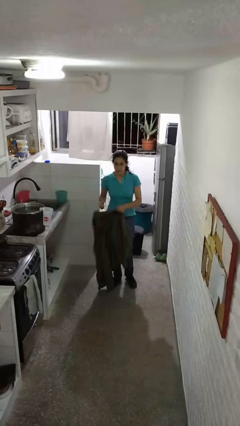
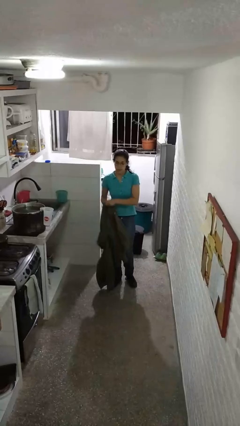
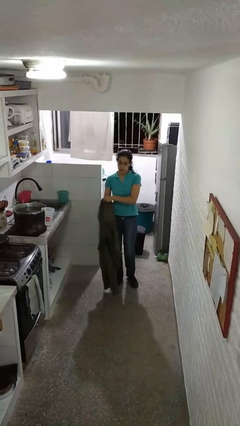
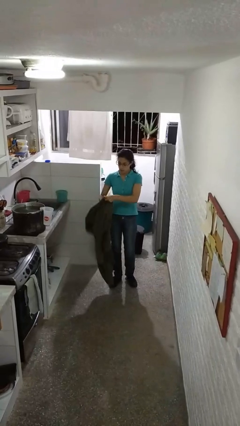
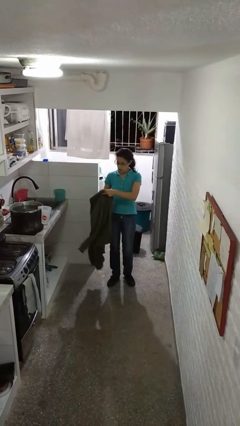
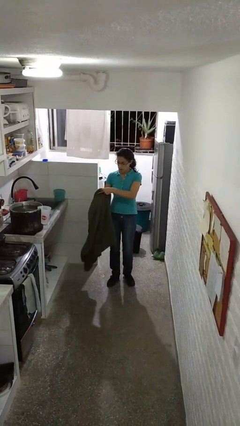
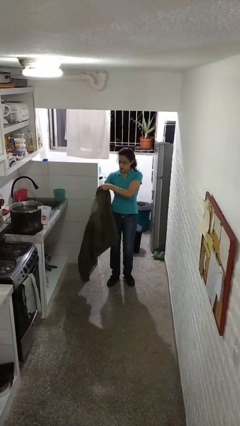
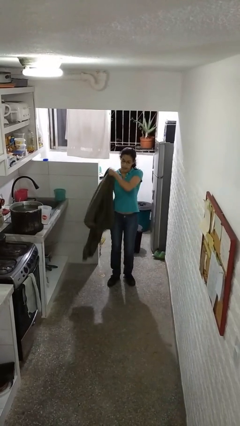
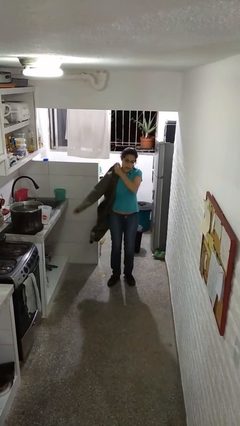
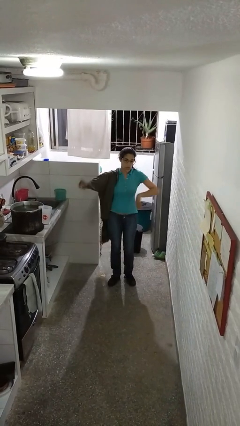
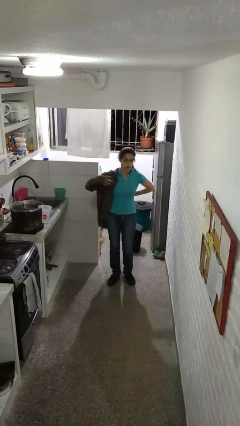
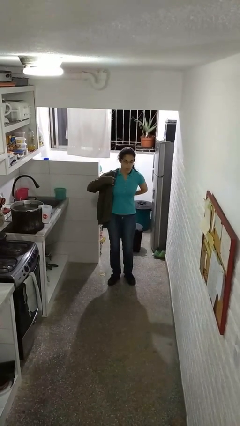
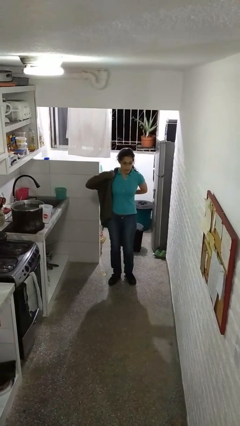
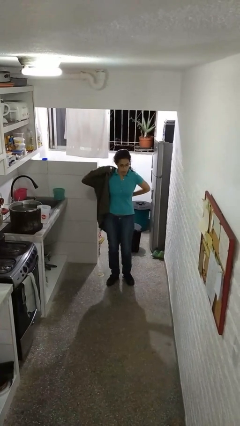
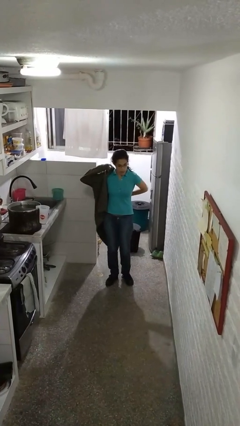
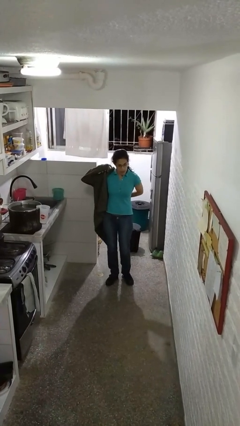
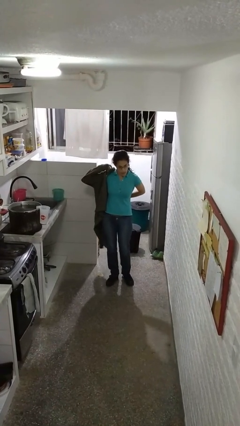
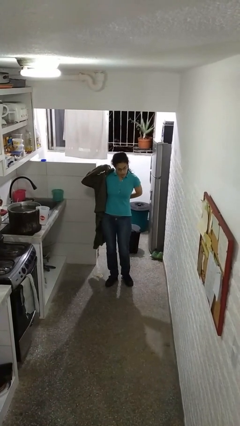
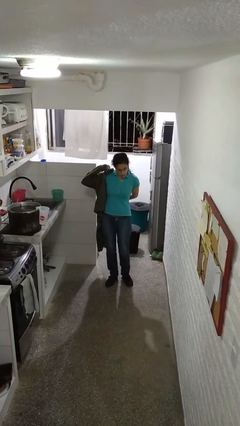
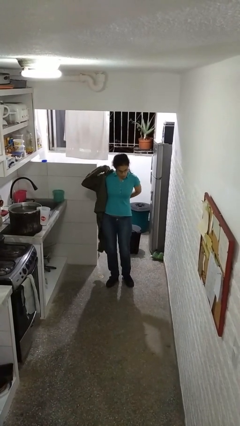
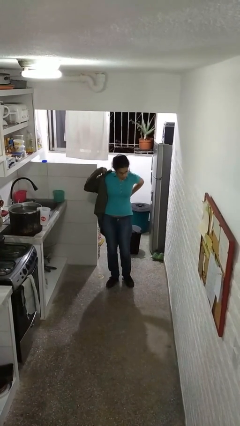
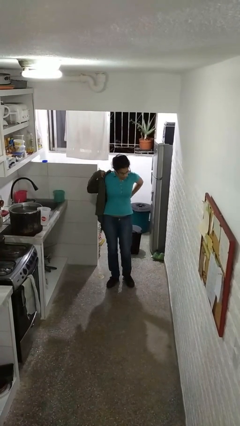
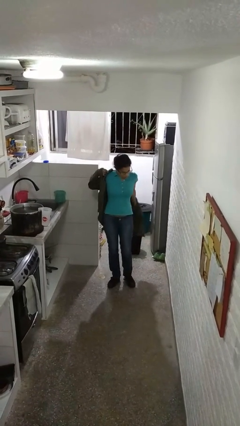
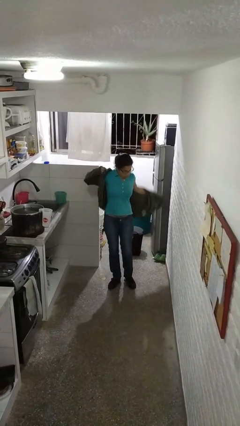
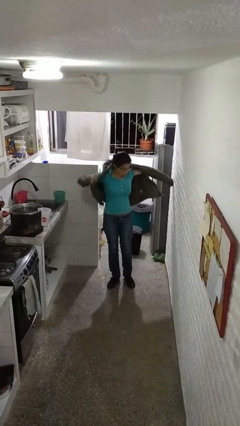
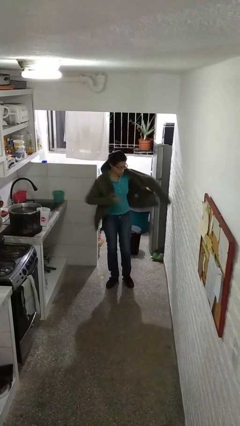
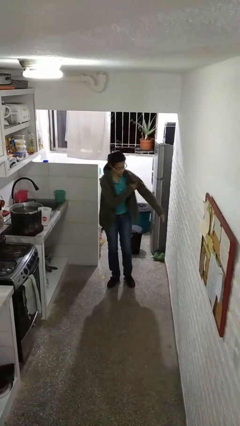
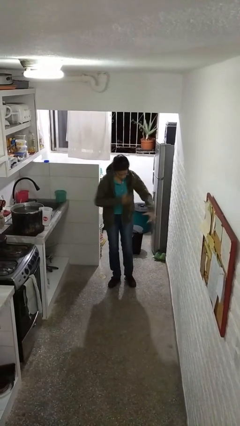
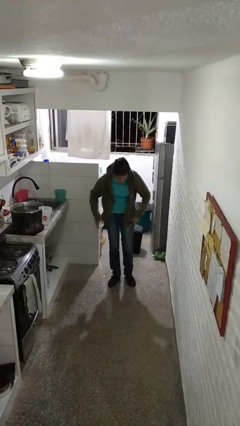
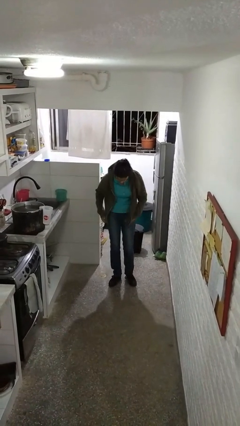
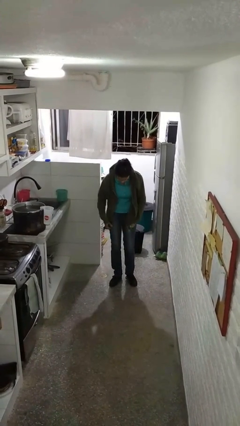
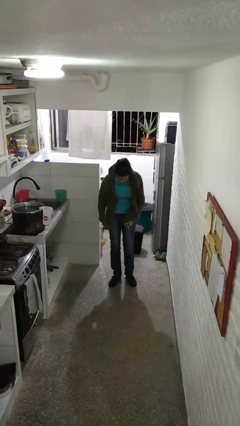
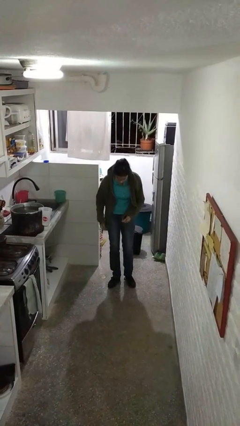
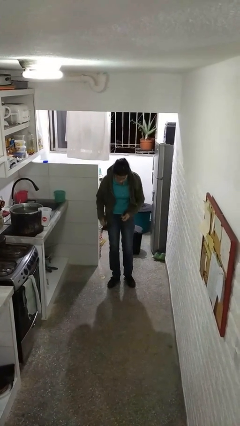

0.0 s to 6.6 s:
person zips up jacket

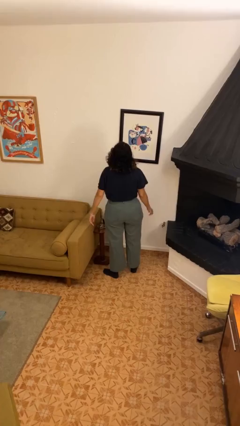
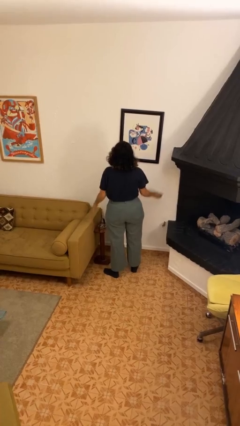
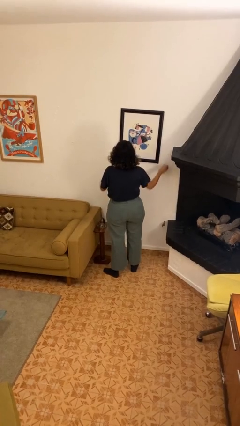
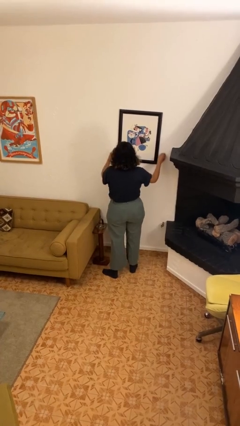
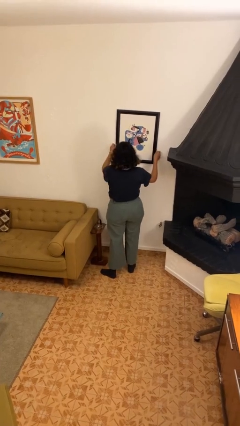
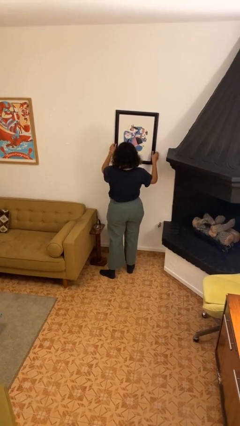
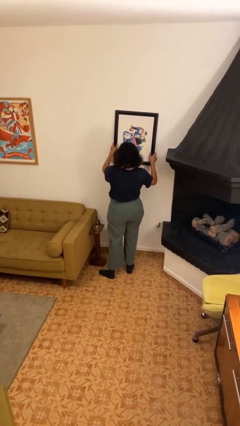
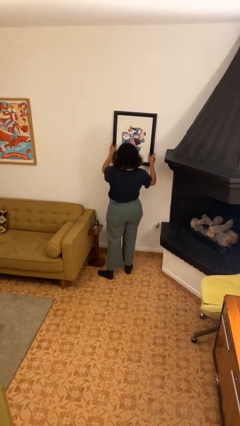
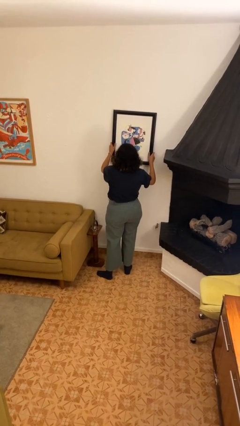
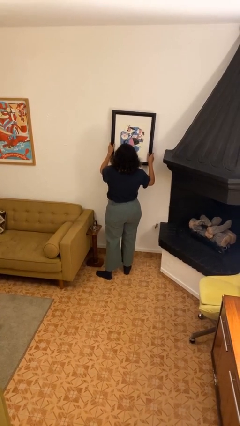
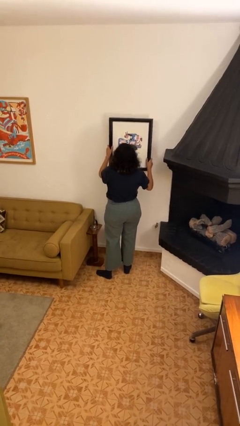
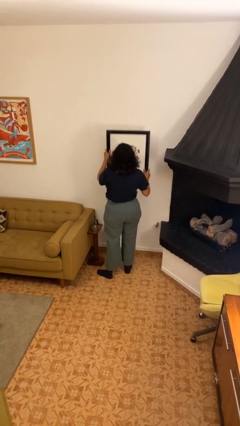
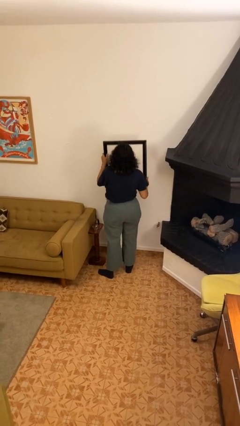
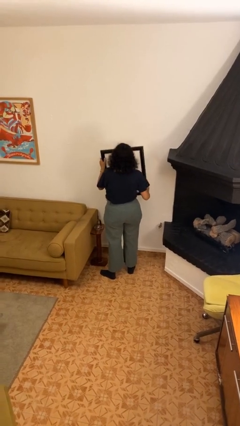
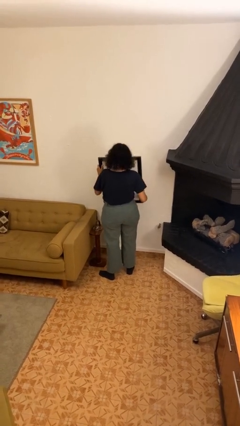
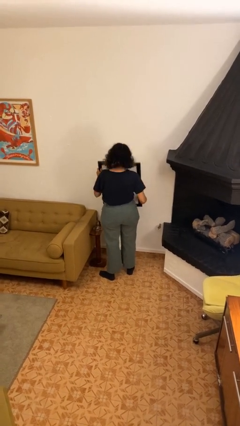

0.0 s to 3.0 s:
person takes down picture frame

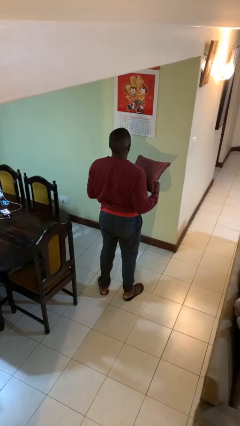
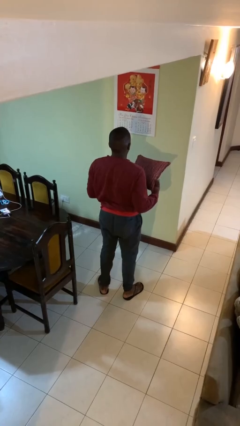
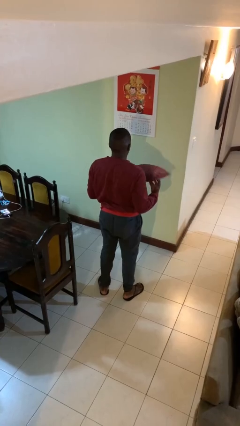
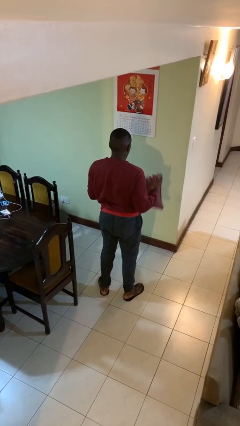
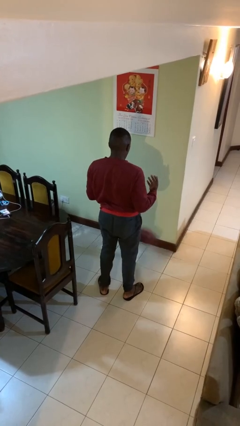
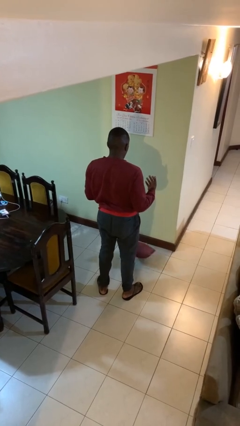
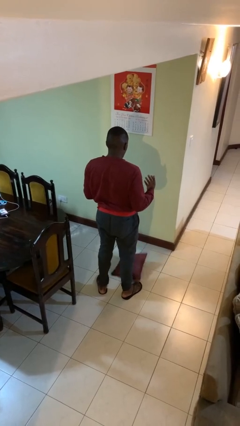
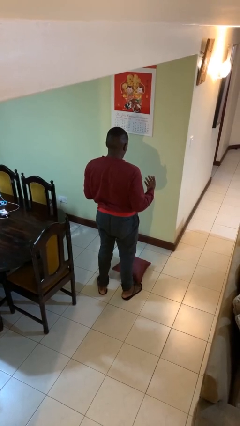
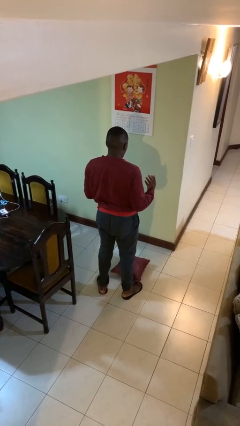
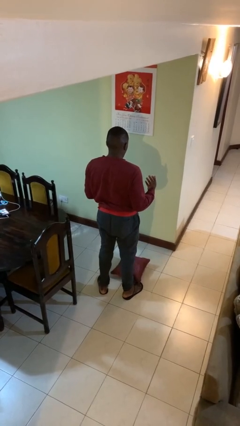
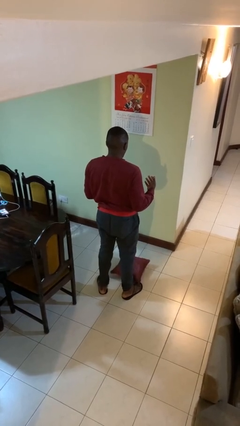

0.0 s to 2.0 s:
person drops object

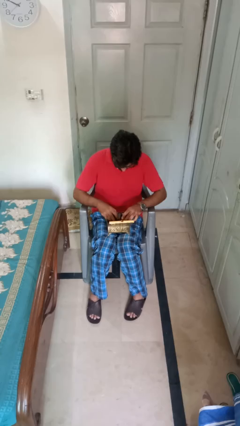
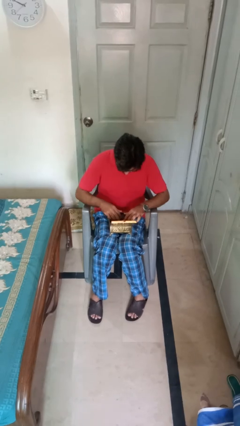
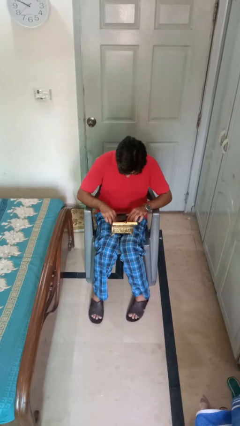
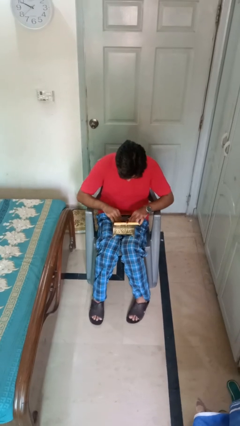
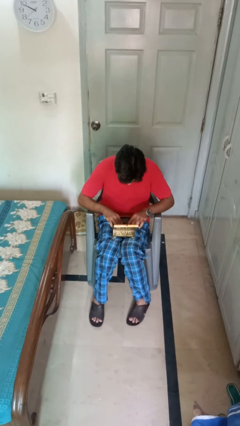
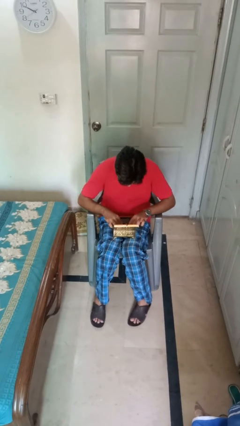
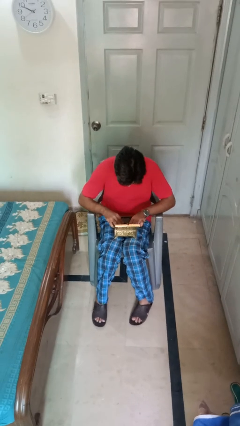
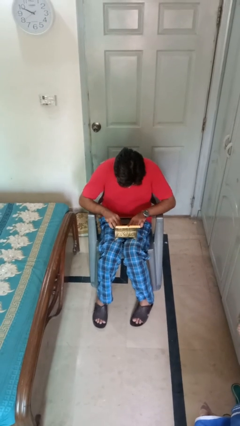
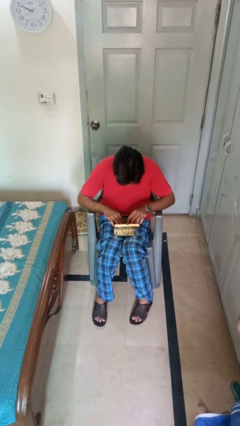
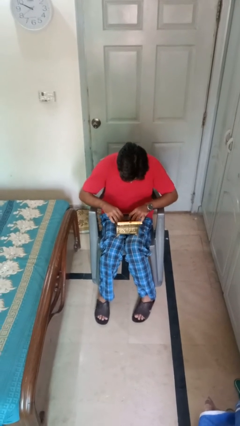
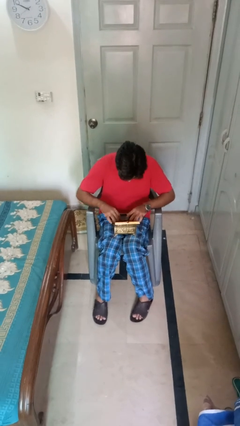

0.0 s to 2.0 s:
person searches jewelry box

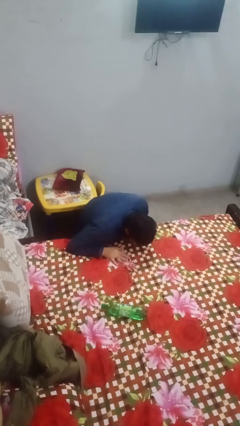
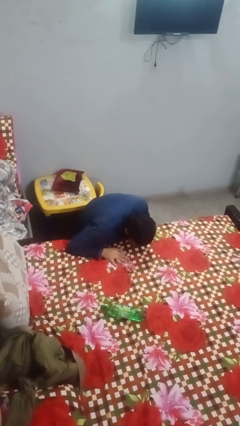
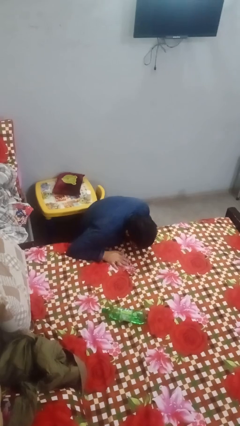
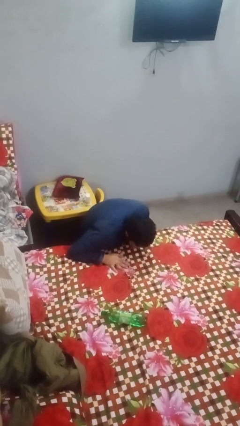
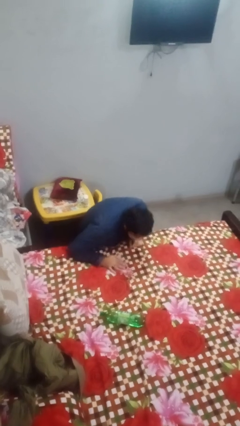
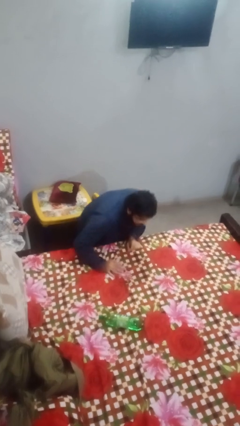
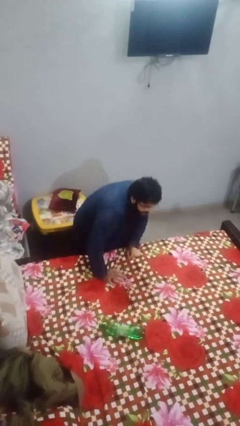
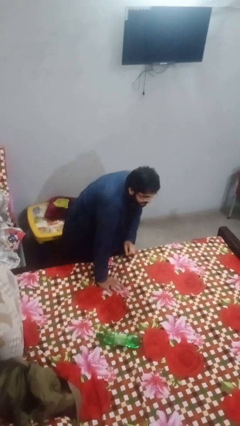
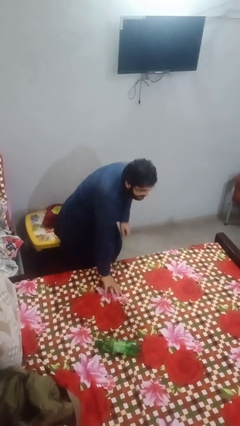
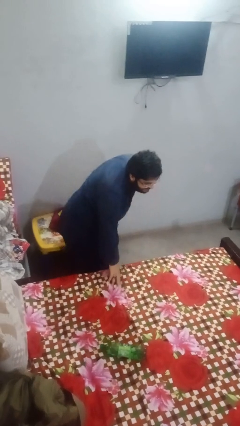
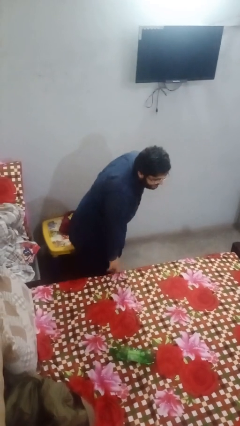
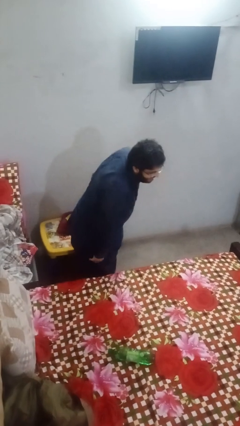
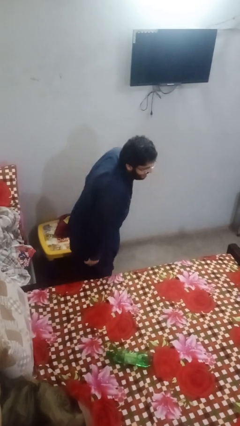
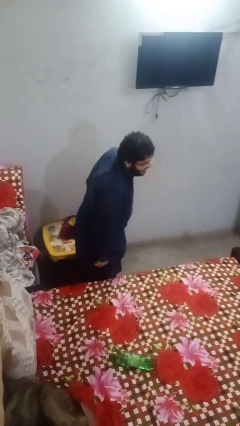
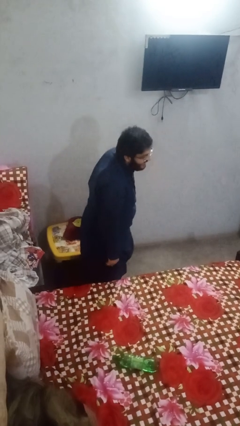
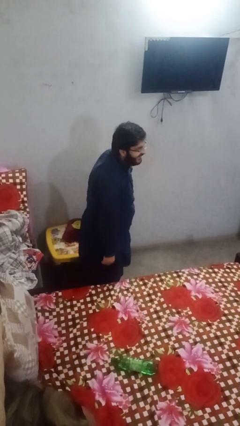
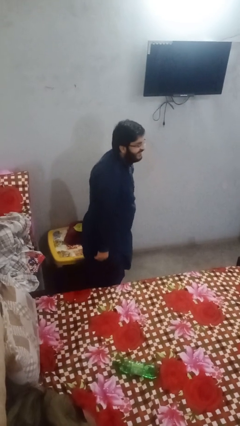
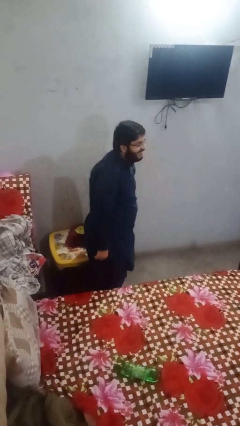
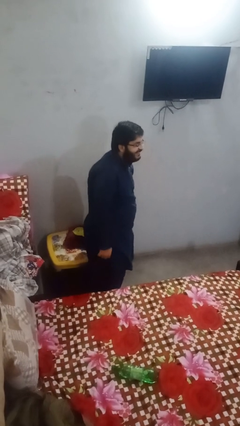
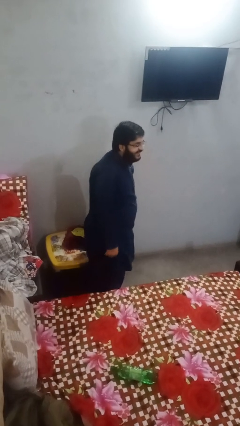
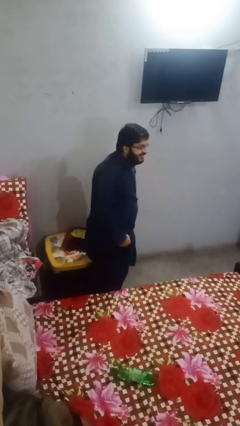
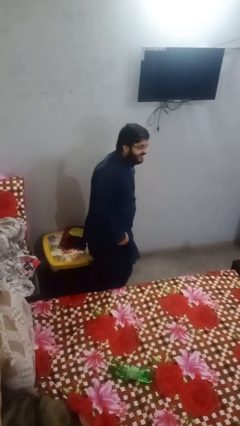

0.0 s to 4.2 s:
person stands up from floor

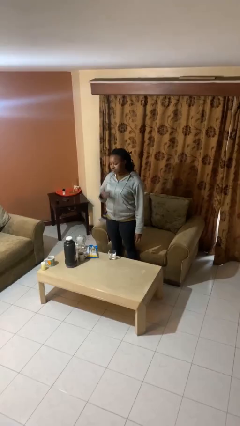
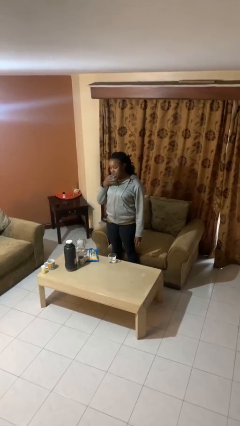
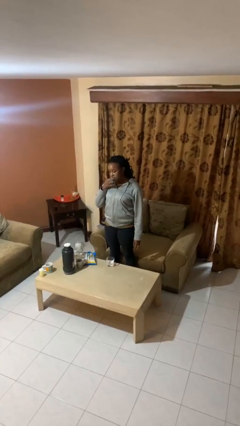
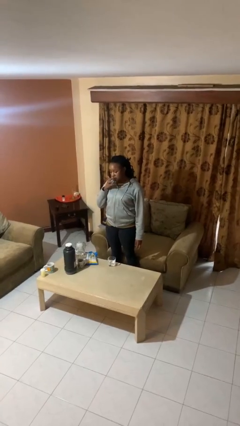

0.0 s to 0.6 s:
person licks fingers
